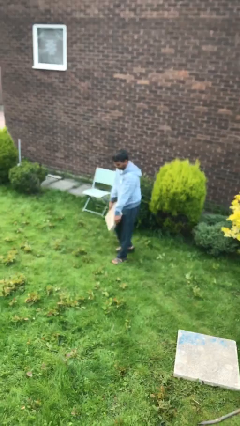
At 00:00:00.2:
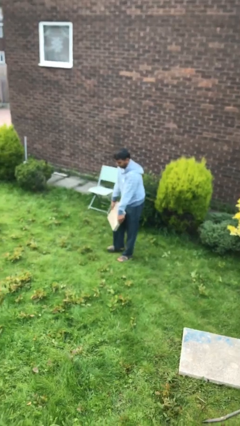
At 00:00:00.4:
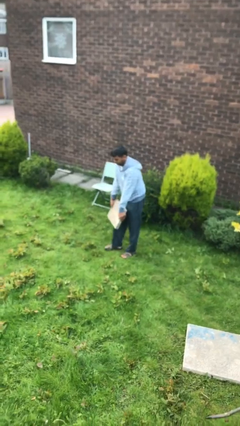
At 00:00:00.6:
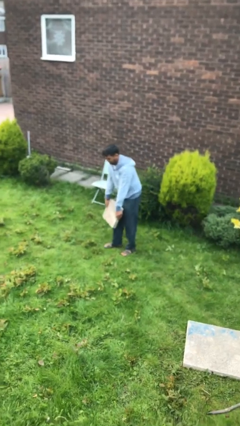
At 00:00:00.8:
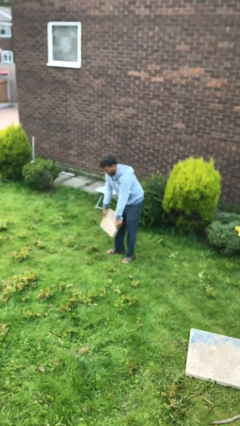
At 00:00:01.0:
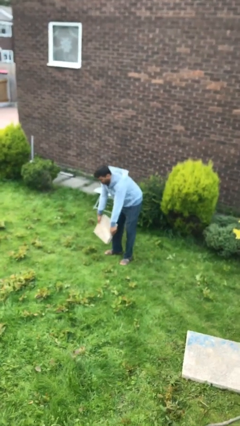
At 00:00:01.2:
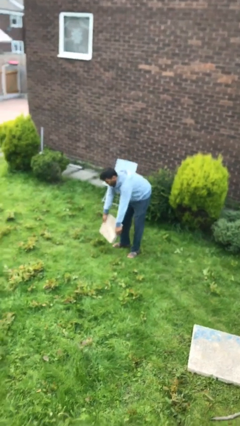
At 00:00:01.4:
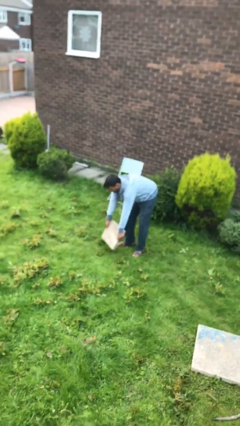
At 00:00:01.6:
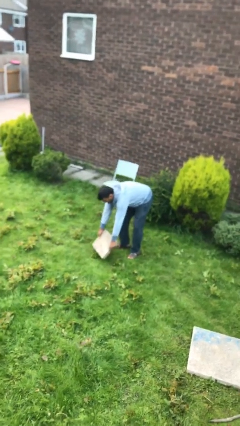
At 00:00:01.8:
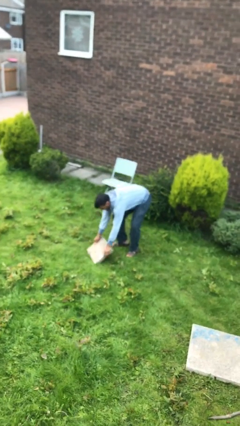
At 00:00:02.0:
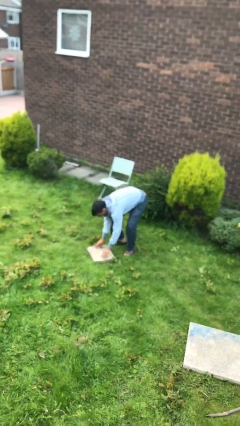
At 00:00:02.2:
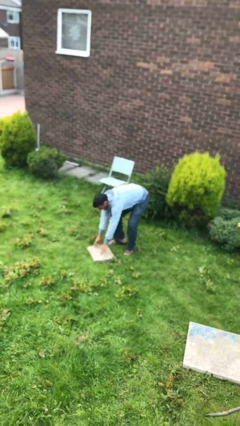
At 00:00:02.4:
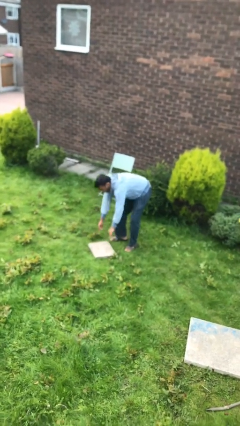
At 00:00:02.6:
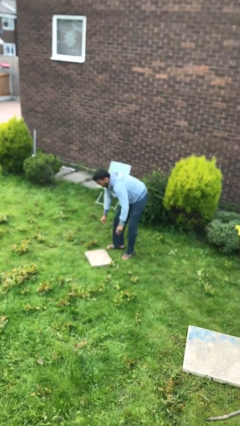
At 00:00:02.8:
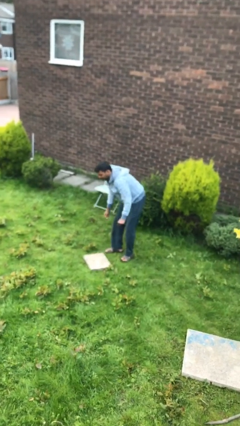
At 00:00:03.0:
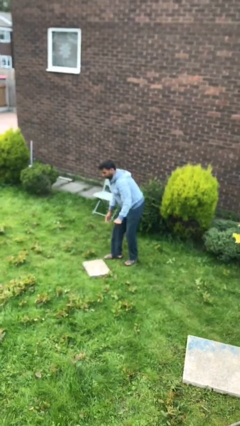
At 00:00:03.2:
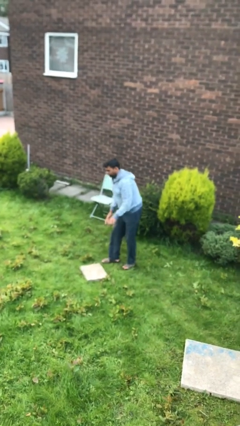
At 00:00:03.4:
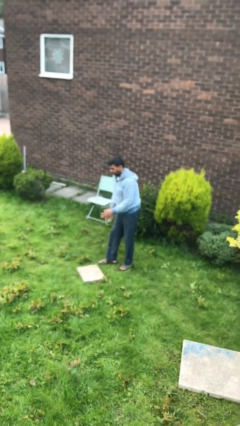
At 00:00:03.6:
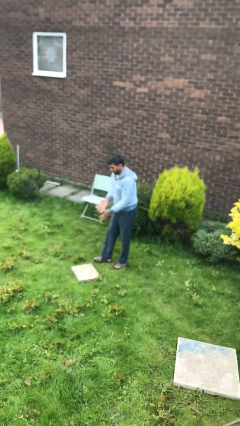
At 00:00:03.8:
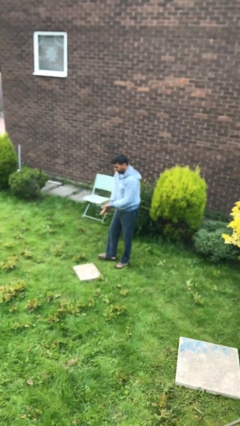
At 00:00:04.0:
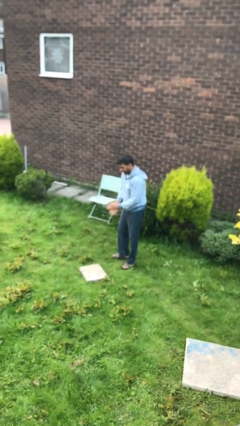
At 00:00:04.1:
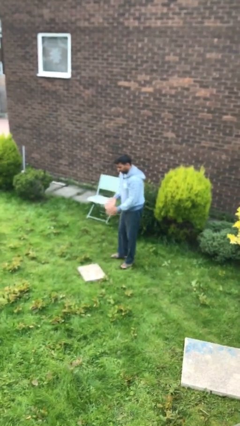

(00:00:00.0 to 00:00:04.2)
person puts down object on floor

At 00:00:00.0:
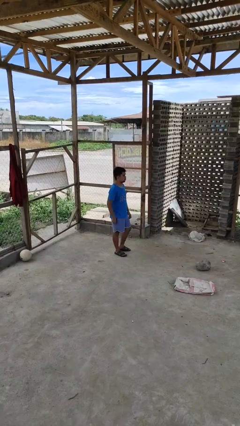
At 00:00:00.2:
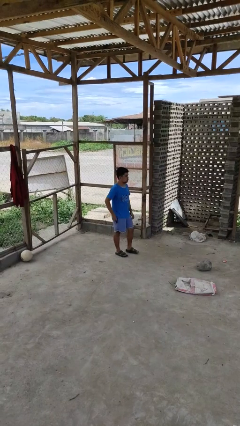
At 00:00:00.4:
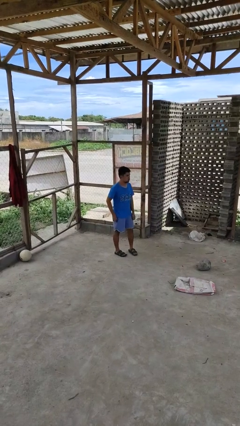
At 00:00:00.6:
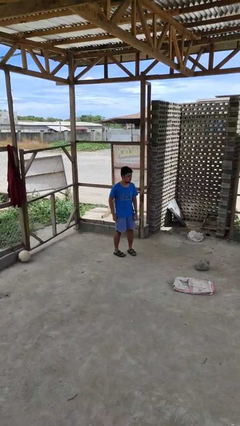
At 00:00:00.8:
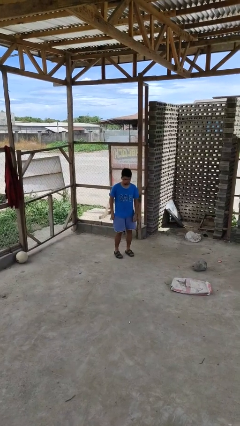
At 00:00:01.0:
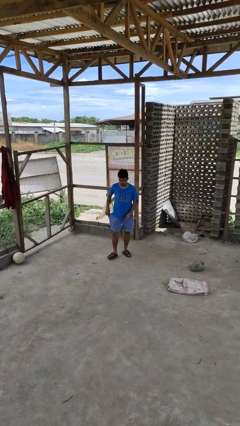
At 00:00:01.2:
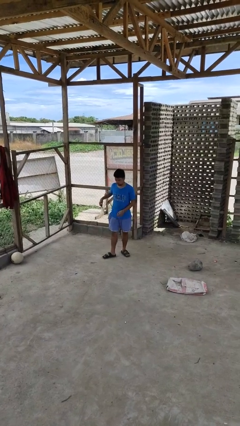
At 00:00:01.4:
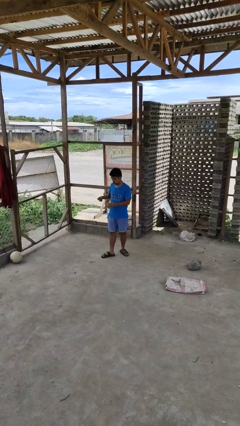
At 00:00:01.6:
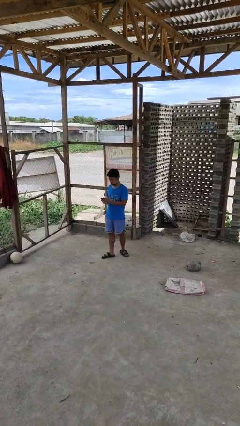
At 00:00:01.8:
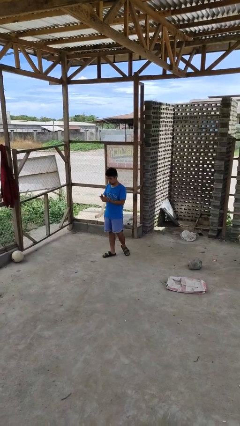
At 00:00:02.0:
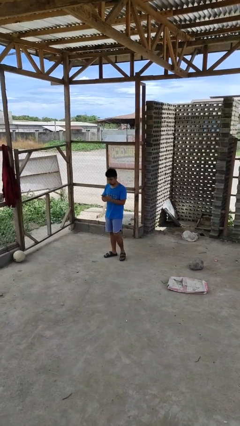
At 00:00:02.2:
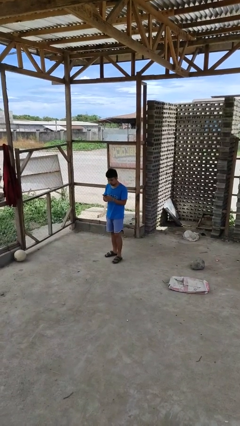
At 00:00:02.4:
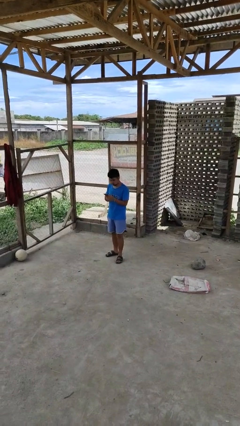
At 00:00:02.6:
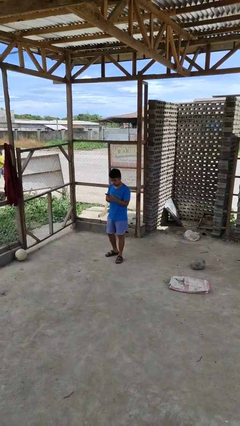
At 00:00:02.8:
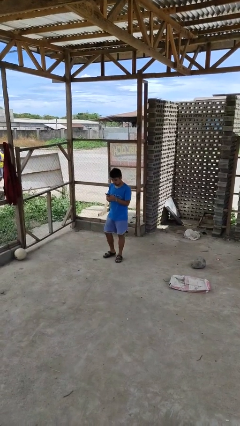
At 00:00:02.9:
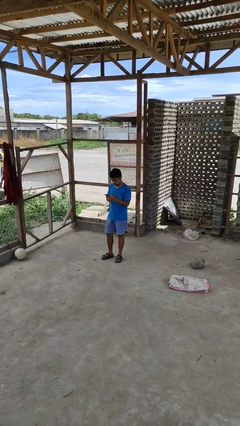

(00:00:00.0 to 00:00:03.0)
person takes phone from pocket

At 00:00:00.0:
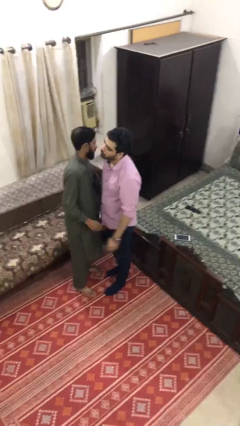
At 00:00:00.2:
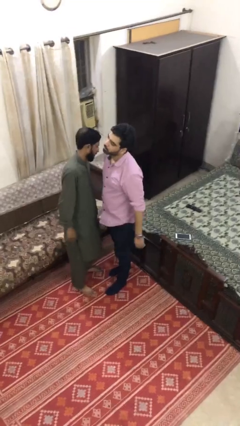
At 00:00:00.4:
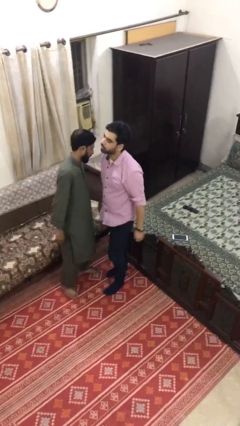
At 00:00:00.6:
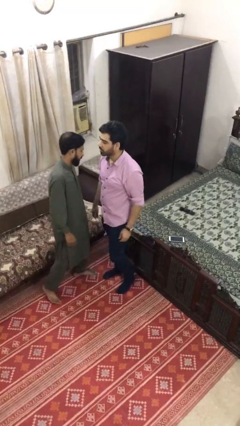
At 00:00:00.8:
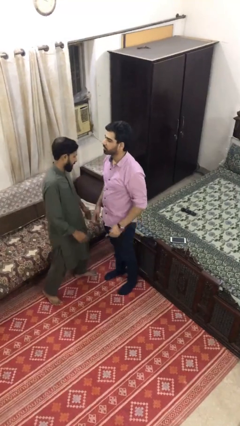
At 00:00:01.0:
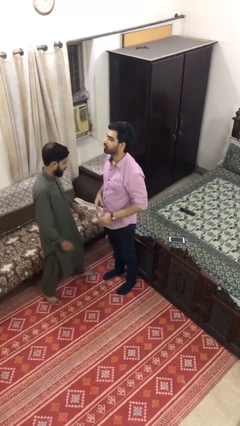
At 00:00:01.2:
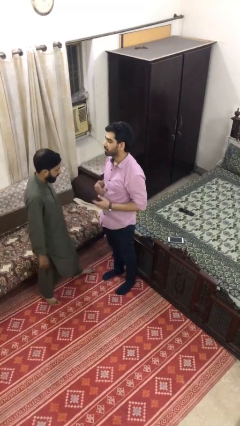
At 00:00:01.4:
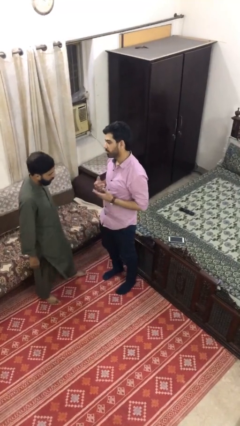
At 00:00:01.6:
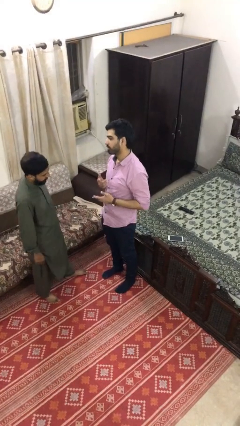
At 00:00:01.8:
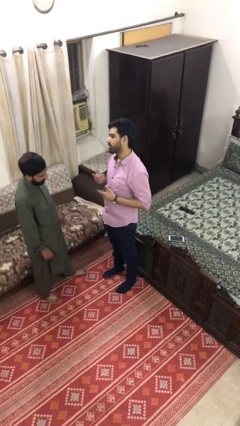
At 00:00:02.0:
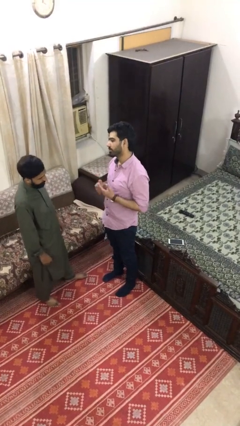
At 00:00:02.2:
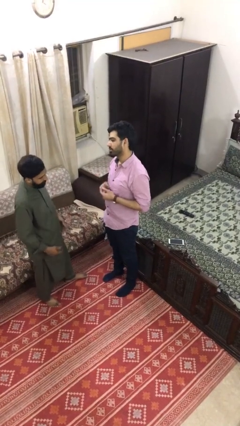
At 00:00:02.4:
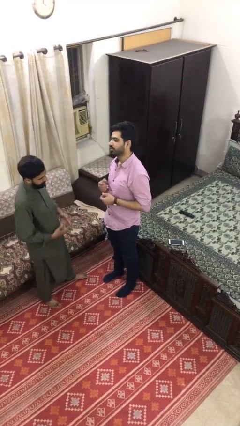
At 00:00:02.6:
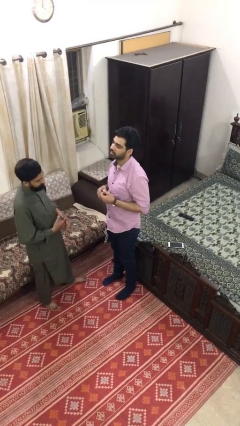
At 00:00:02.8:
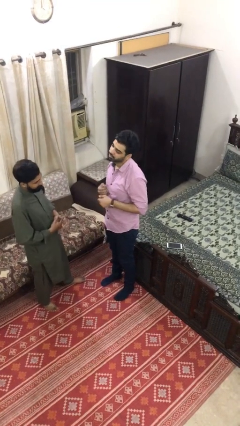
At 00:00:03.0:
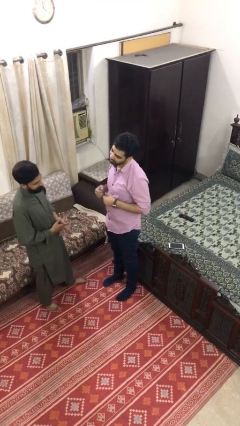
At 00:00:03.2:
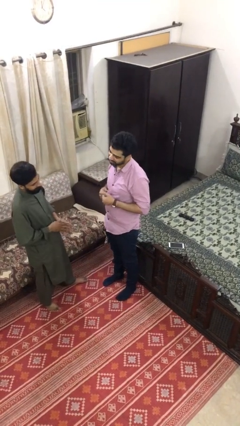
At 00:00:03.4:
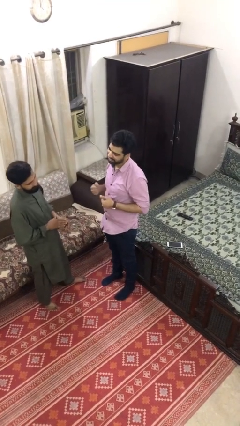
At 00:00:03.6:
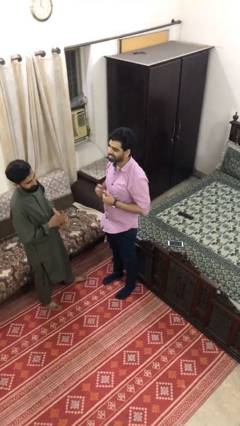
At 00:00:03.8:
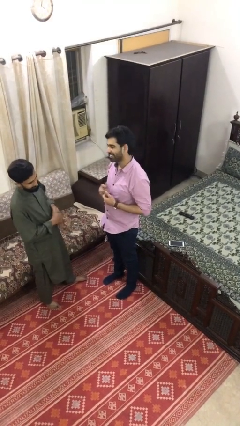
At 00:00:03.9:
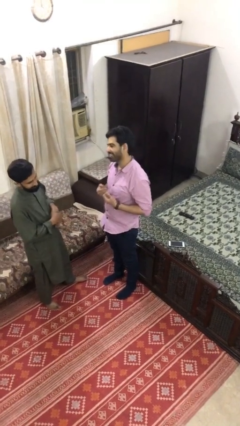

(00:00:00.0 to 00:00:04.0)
person talks to person

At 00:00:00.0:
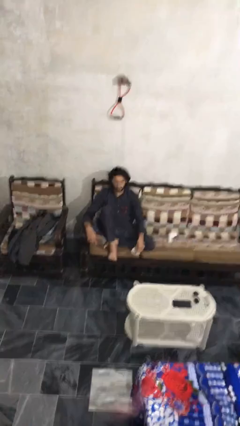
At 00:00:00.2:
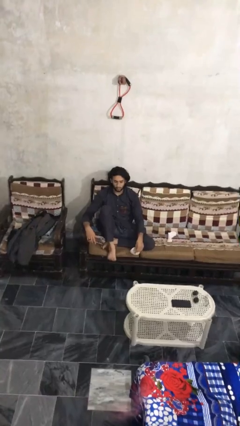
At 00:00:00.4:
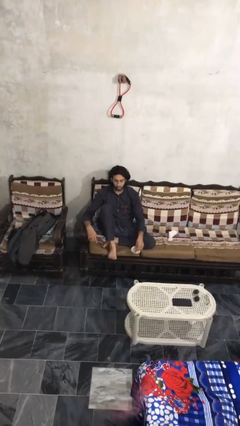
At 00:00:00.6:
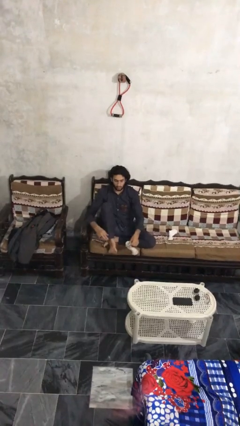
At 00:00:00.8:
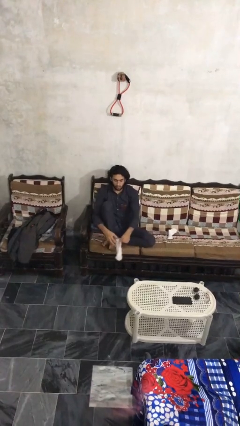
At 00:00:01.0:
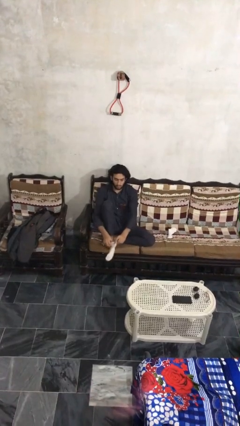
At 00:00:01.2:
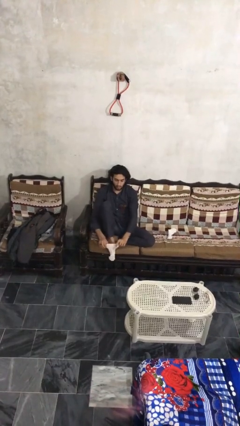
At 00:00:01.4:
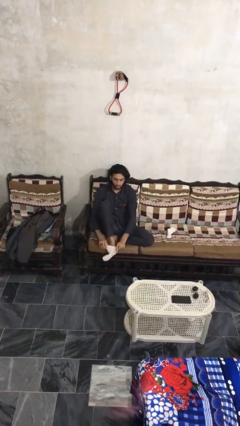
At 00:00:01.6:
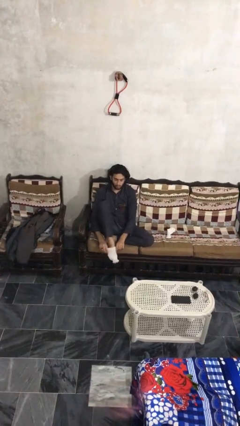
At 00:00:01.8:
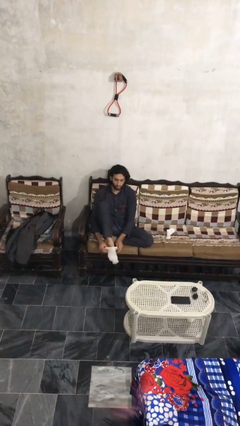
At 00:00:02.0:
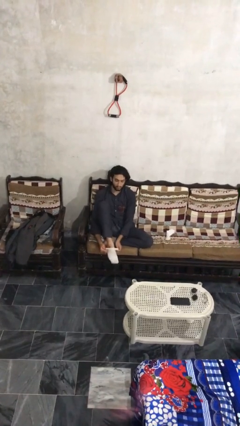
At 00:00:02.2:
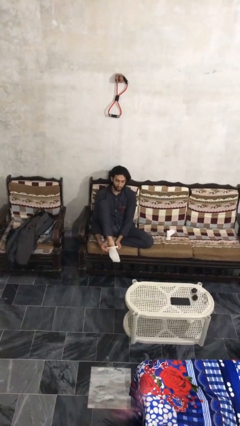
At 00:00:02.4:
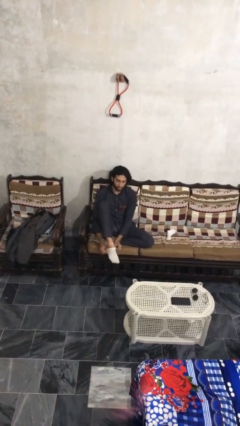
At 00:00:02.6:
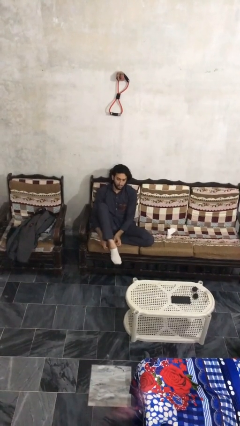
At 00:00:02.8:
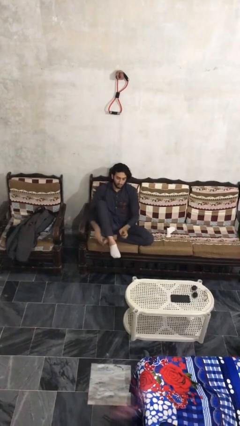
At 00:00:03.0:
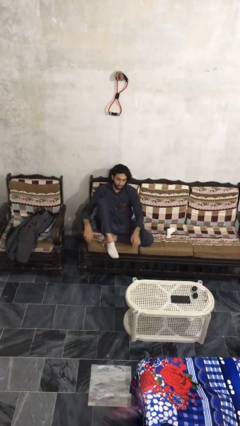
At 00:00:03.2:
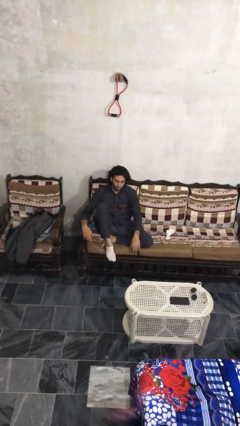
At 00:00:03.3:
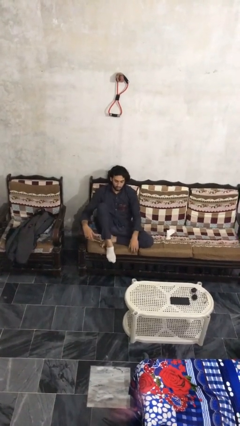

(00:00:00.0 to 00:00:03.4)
person puts on socks

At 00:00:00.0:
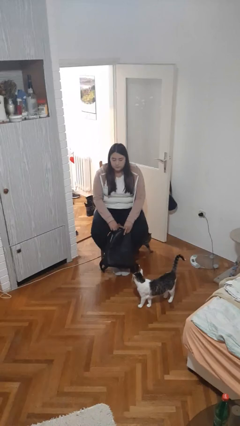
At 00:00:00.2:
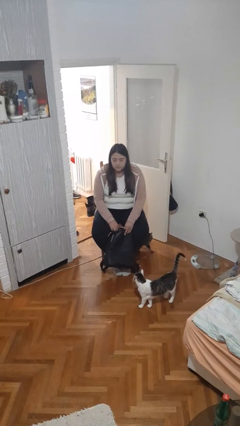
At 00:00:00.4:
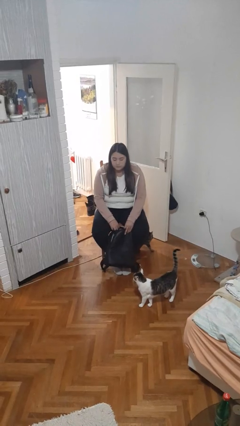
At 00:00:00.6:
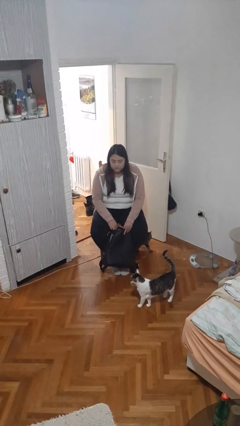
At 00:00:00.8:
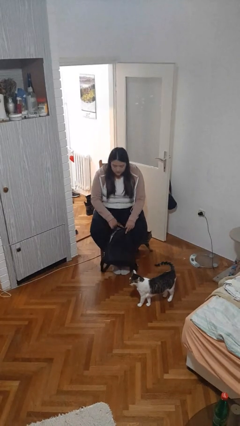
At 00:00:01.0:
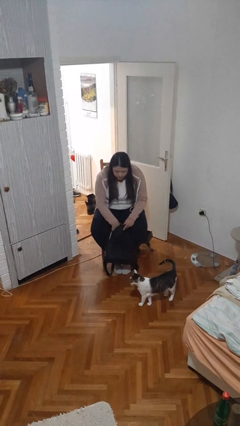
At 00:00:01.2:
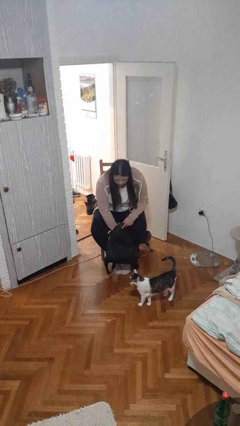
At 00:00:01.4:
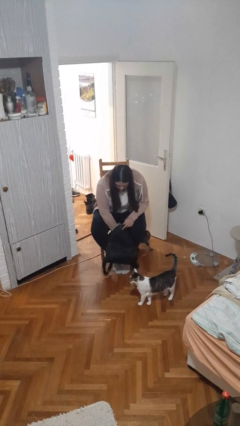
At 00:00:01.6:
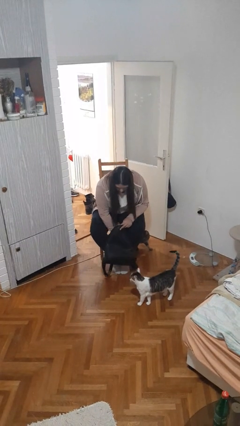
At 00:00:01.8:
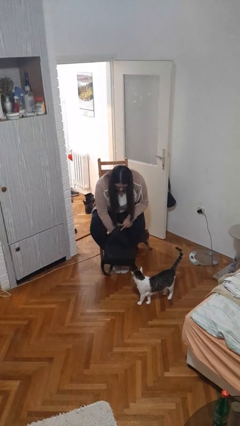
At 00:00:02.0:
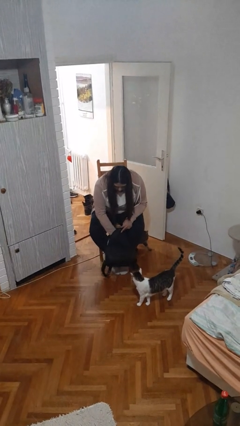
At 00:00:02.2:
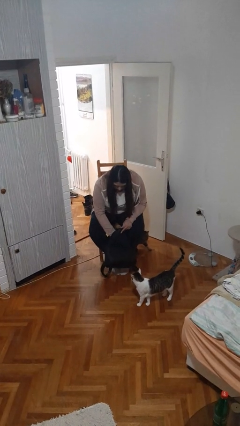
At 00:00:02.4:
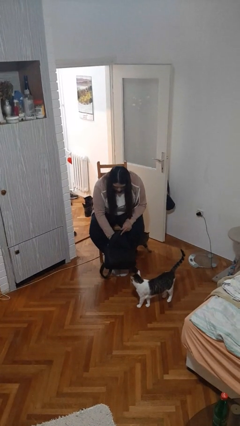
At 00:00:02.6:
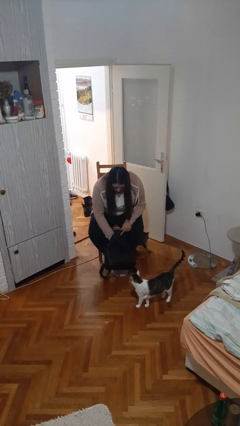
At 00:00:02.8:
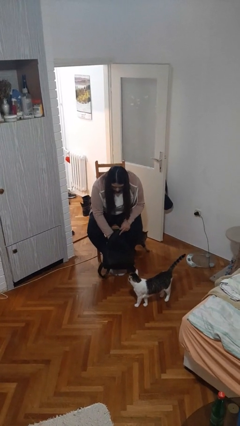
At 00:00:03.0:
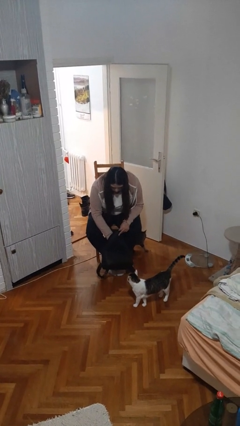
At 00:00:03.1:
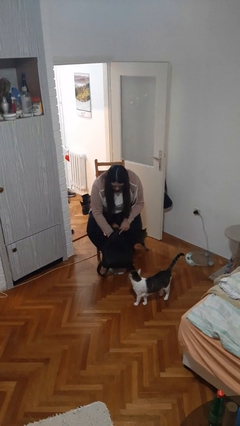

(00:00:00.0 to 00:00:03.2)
person searches in backpack
